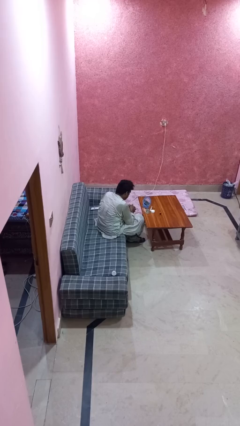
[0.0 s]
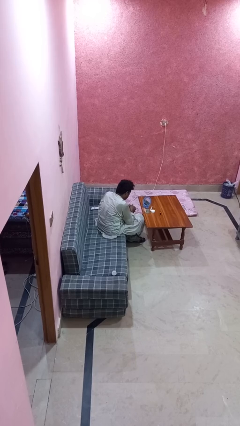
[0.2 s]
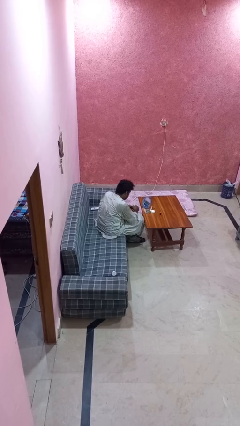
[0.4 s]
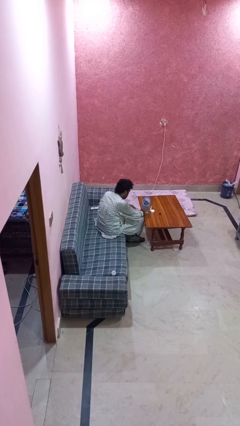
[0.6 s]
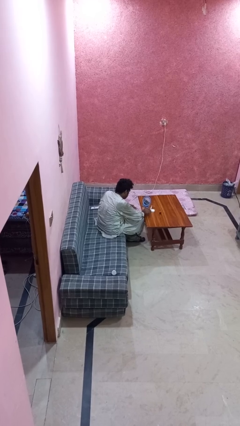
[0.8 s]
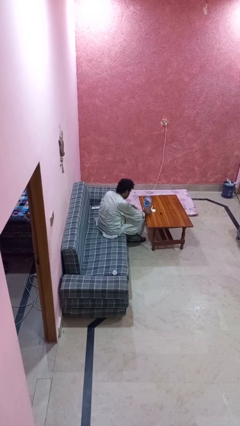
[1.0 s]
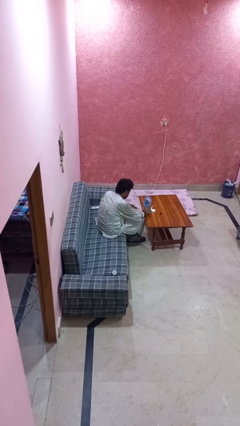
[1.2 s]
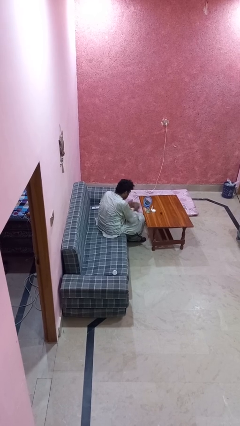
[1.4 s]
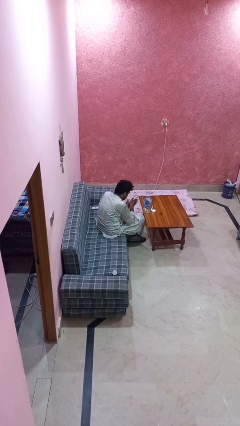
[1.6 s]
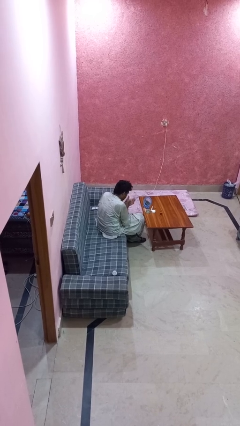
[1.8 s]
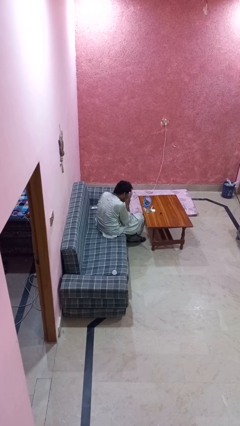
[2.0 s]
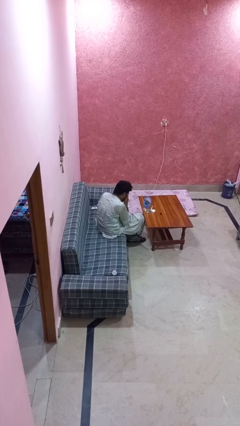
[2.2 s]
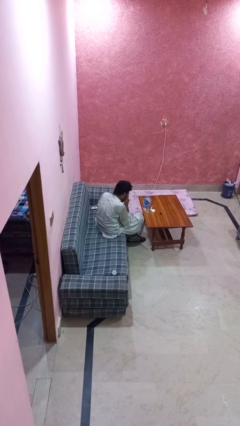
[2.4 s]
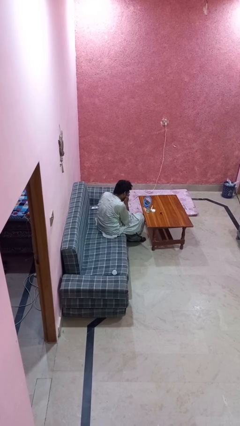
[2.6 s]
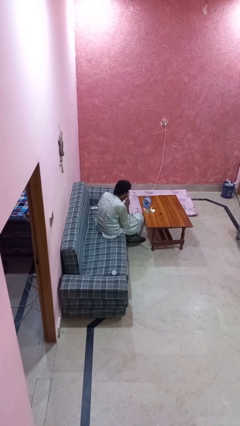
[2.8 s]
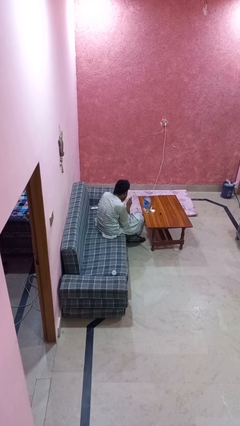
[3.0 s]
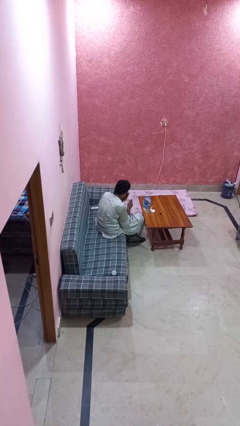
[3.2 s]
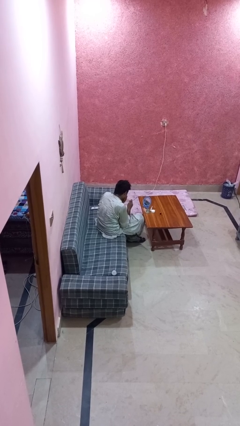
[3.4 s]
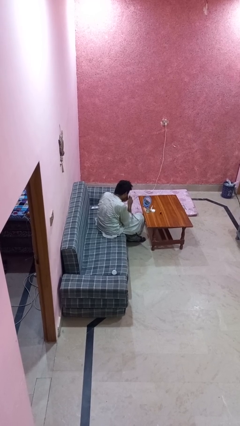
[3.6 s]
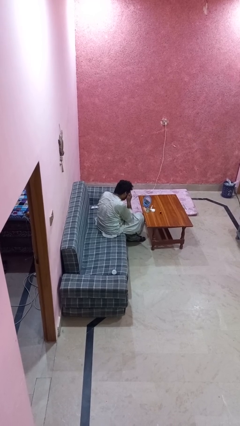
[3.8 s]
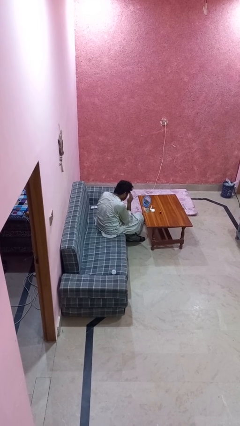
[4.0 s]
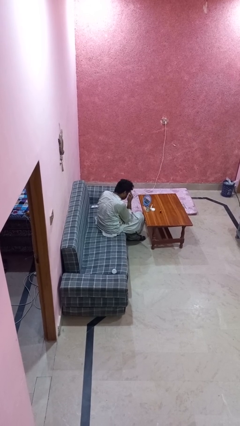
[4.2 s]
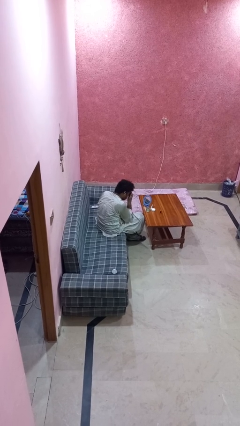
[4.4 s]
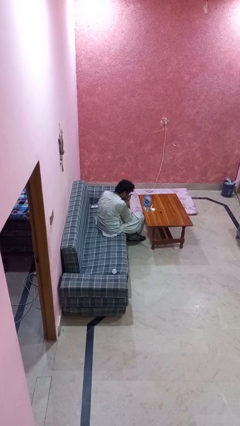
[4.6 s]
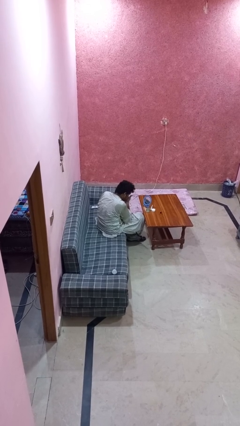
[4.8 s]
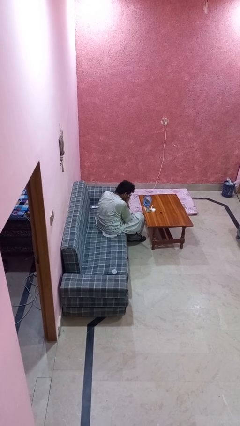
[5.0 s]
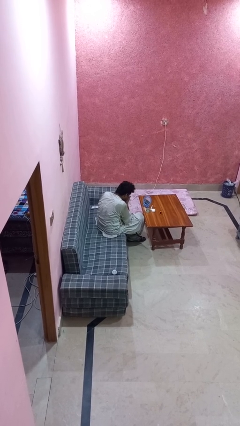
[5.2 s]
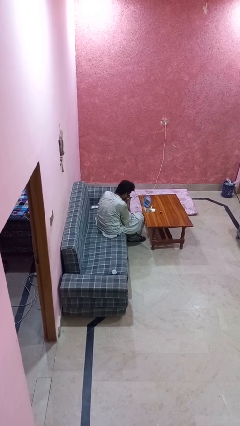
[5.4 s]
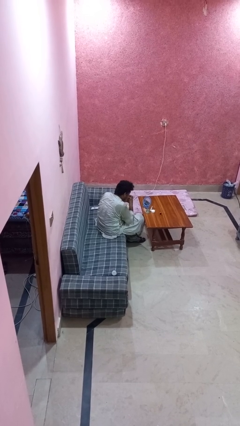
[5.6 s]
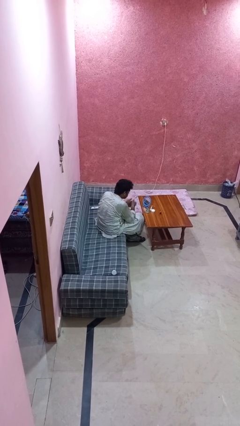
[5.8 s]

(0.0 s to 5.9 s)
person applies foundation makeup

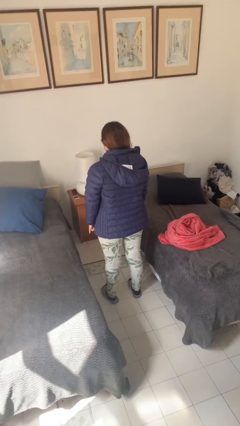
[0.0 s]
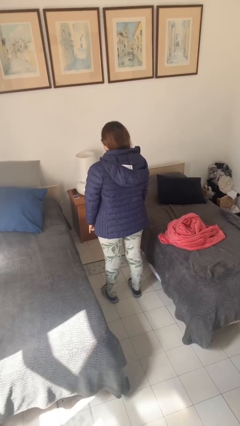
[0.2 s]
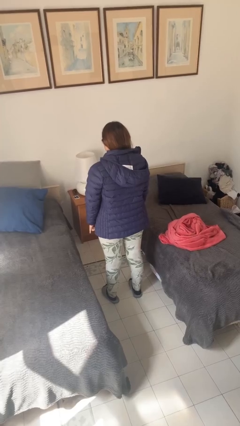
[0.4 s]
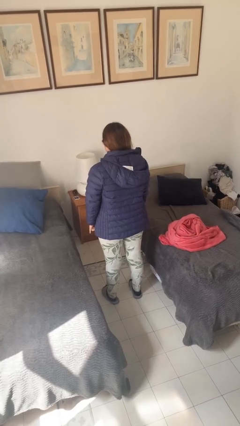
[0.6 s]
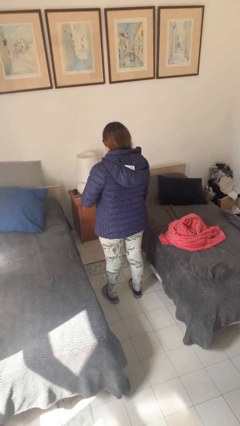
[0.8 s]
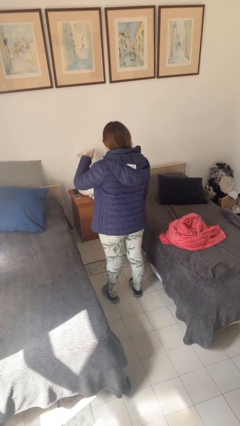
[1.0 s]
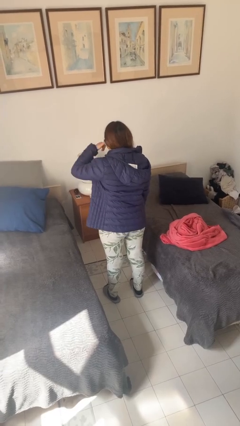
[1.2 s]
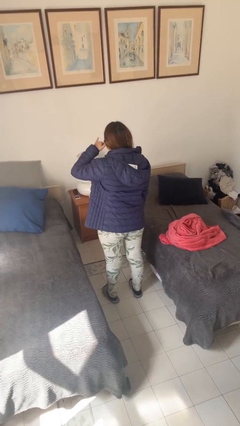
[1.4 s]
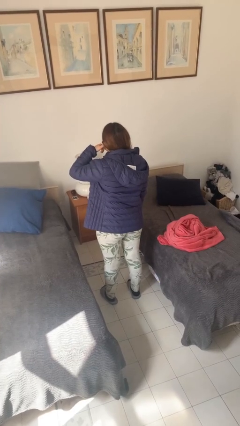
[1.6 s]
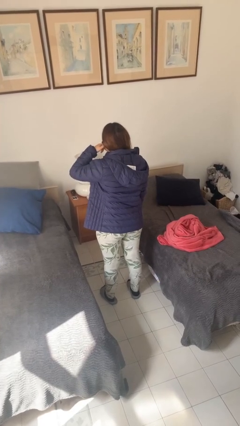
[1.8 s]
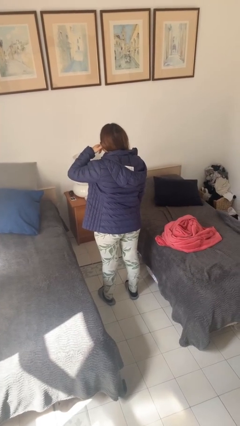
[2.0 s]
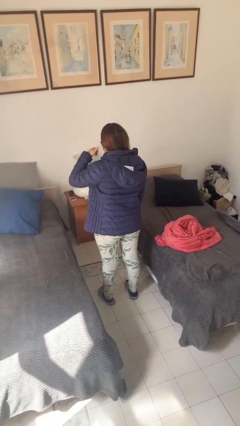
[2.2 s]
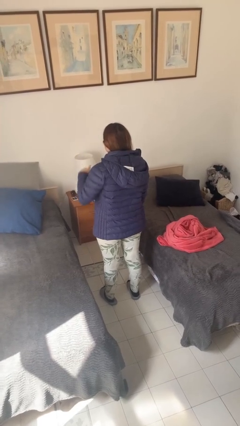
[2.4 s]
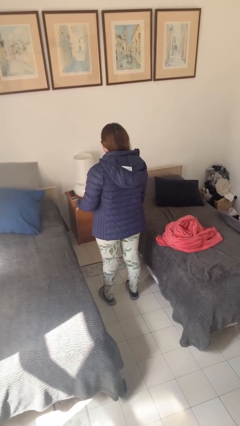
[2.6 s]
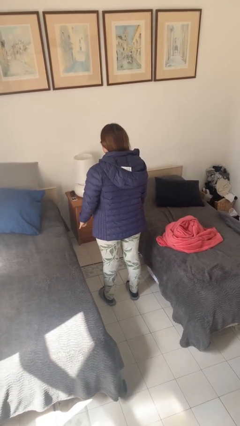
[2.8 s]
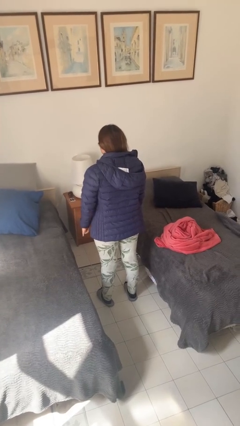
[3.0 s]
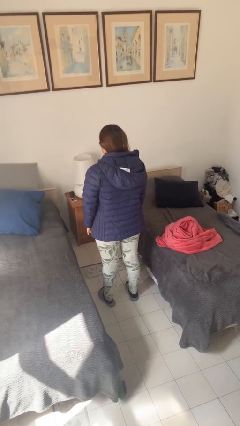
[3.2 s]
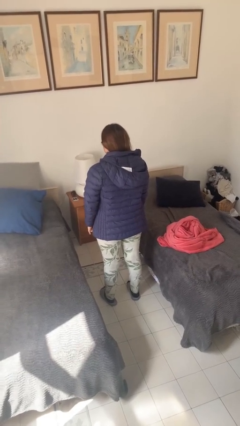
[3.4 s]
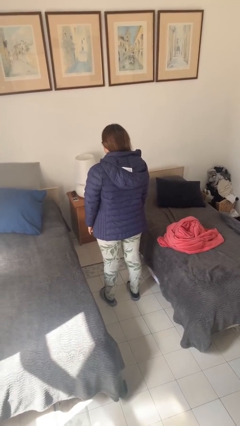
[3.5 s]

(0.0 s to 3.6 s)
person gestures call me

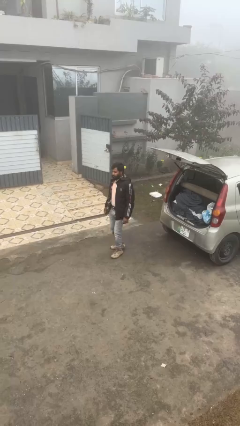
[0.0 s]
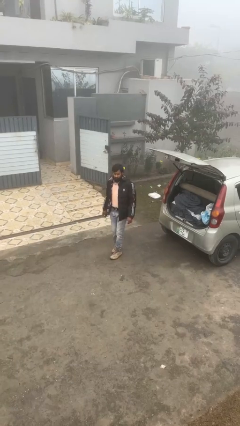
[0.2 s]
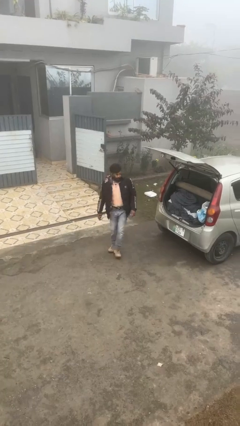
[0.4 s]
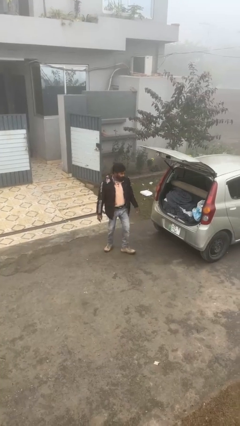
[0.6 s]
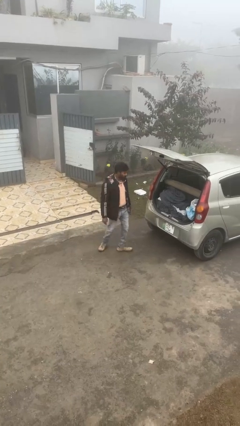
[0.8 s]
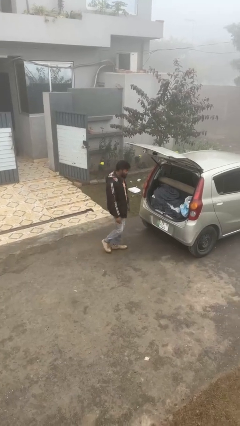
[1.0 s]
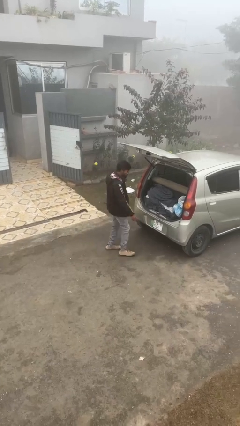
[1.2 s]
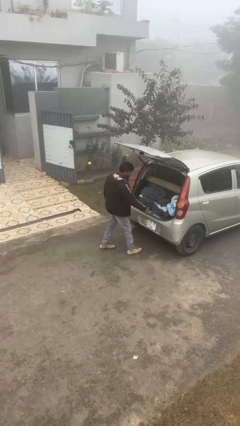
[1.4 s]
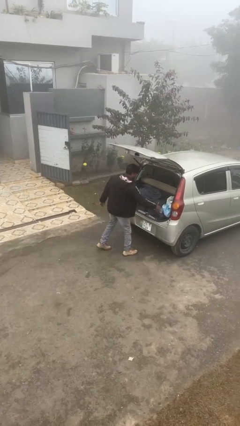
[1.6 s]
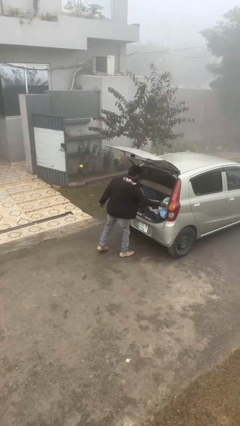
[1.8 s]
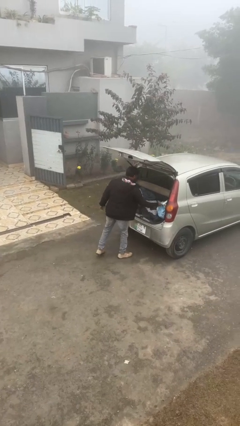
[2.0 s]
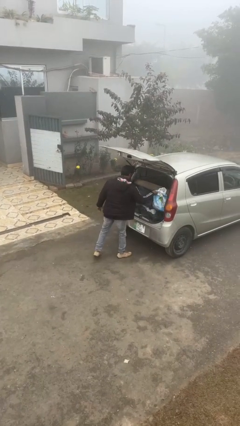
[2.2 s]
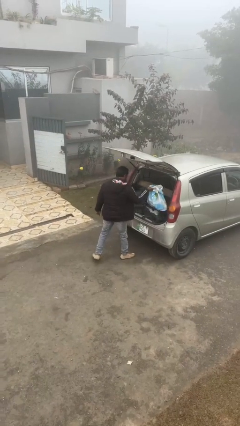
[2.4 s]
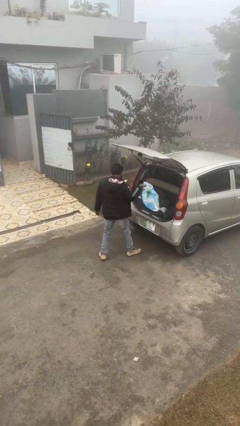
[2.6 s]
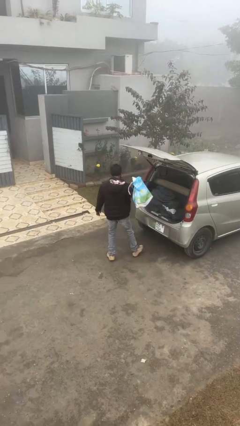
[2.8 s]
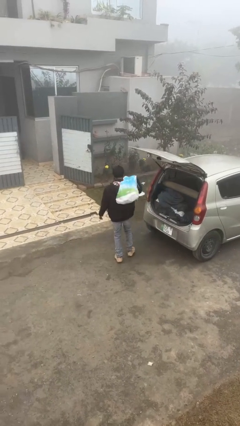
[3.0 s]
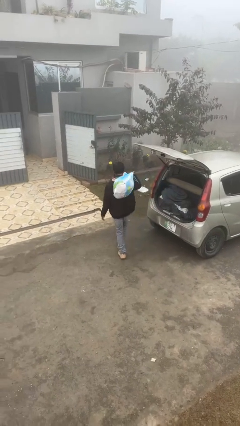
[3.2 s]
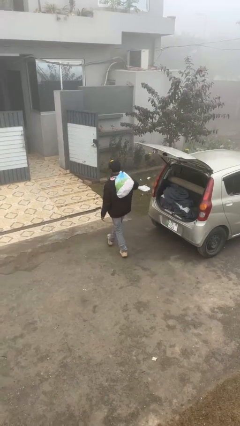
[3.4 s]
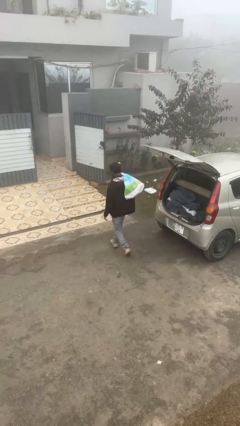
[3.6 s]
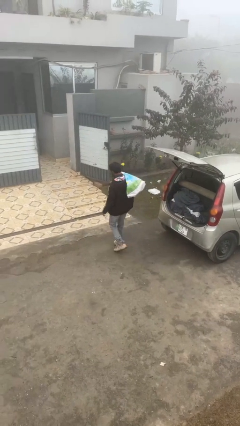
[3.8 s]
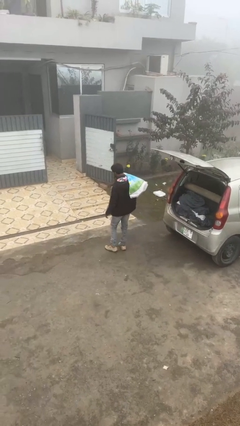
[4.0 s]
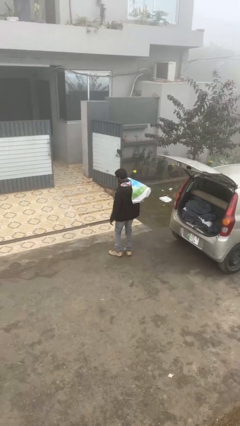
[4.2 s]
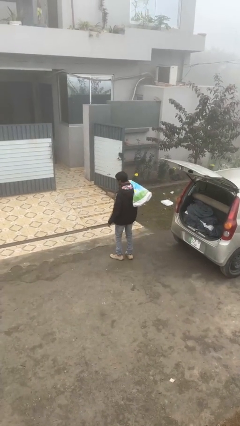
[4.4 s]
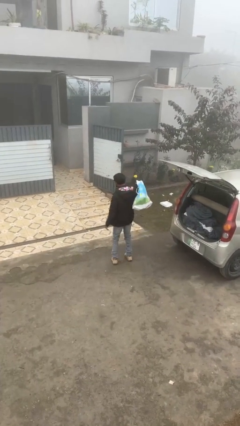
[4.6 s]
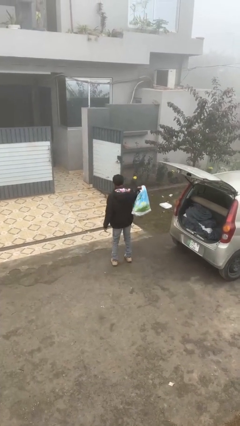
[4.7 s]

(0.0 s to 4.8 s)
person unloads car

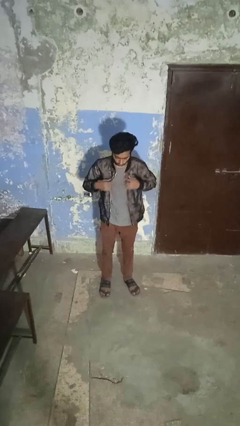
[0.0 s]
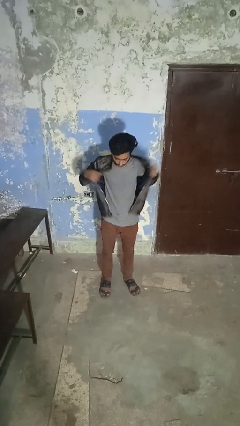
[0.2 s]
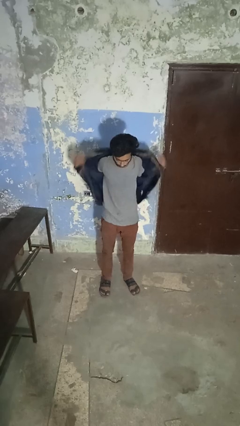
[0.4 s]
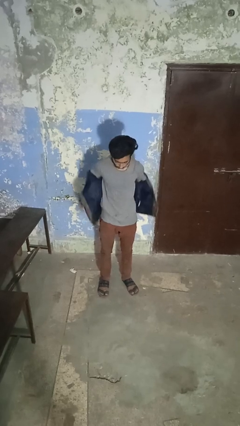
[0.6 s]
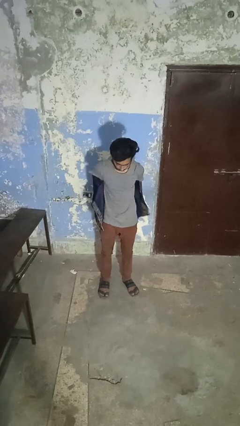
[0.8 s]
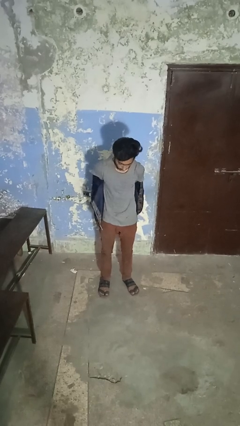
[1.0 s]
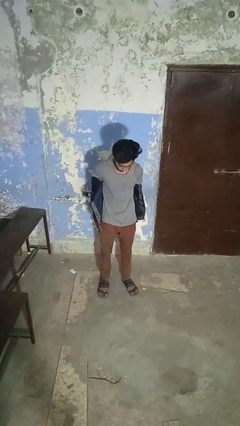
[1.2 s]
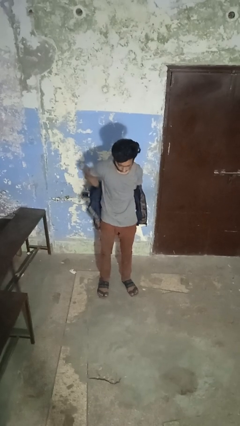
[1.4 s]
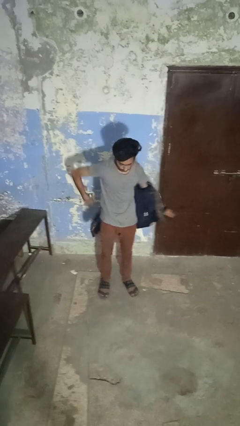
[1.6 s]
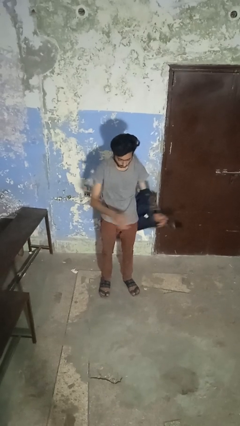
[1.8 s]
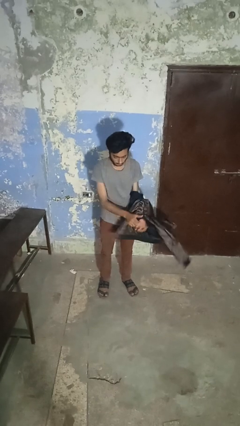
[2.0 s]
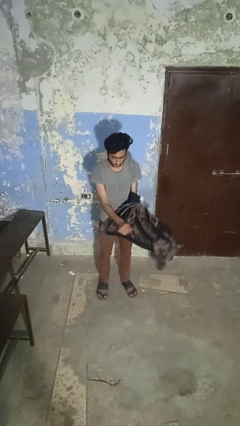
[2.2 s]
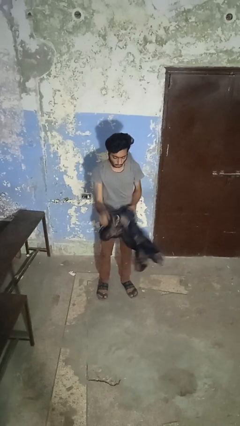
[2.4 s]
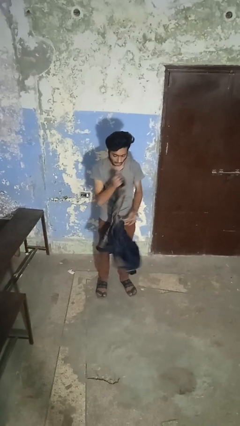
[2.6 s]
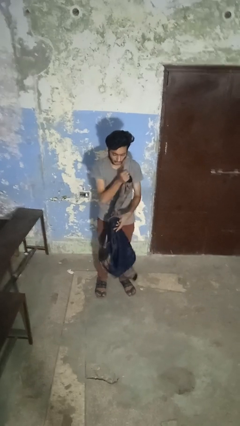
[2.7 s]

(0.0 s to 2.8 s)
person takes off jacket

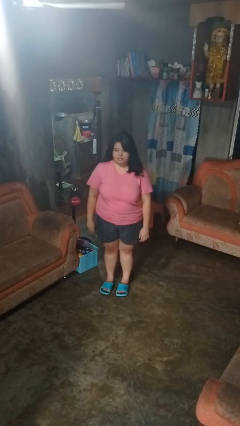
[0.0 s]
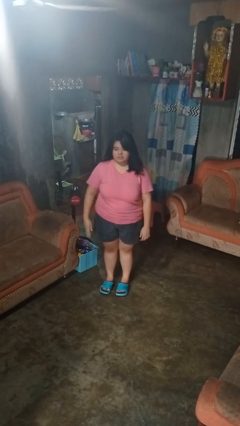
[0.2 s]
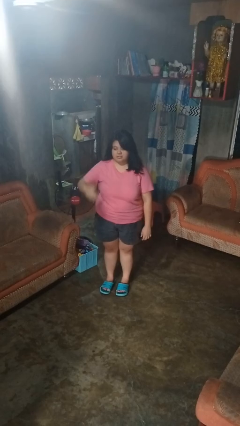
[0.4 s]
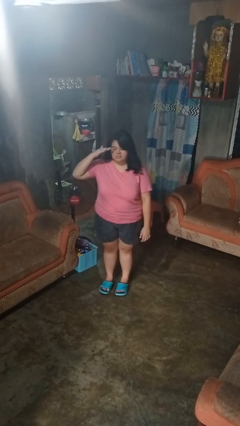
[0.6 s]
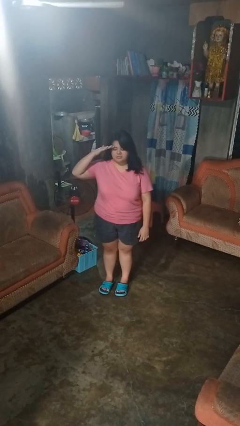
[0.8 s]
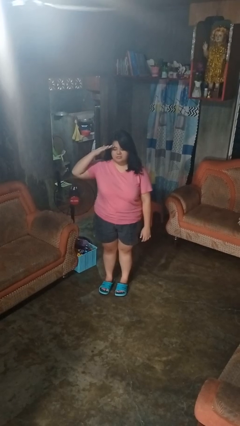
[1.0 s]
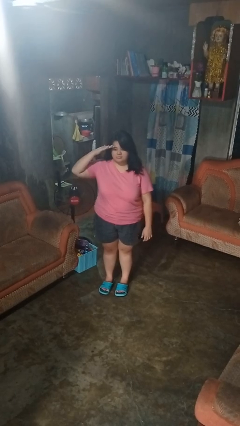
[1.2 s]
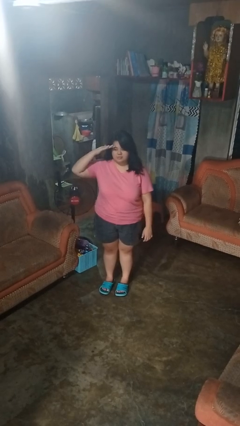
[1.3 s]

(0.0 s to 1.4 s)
person salutes
